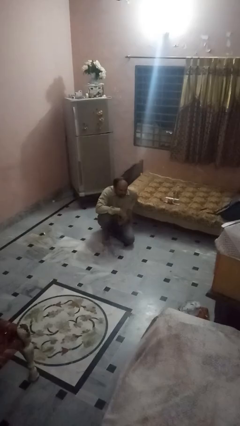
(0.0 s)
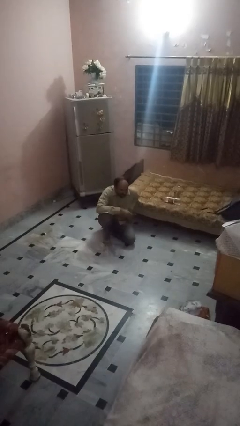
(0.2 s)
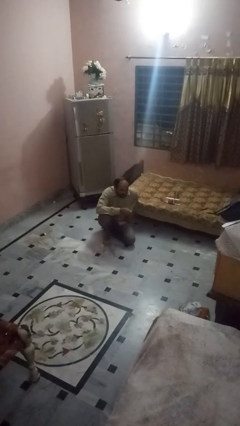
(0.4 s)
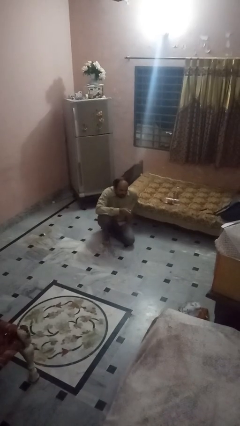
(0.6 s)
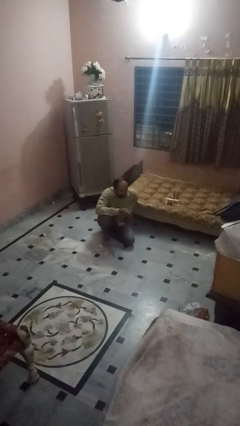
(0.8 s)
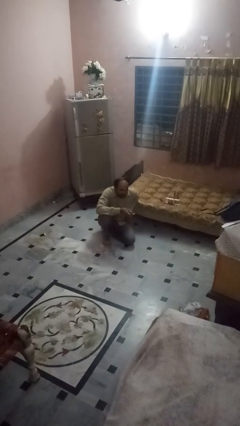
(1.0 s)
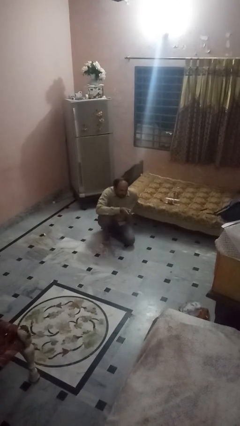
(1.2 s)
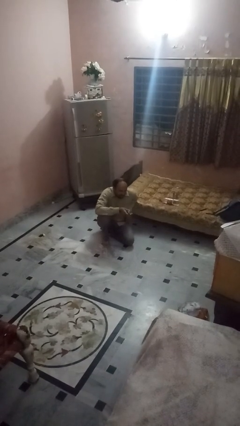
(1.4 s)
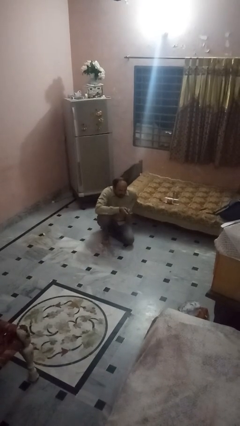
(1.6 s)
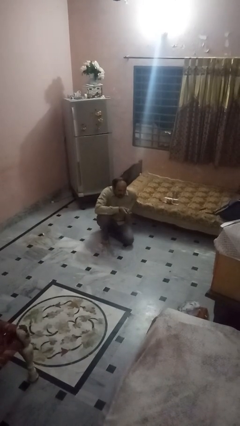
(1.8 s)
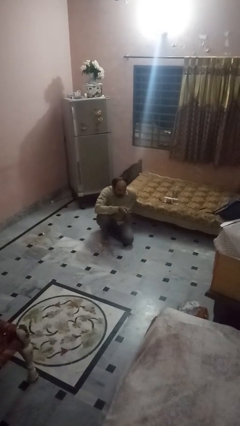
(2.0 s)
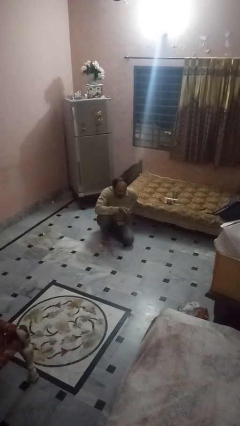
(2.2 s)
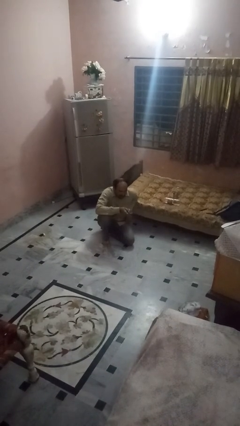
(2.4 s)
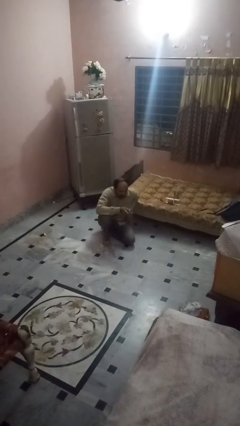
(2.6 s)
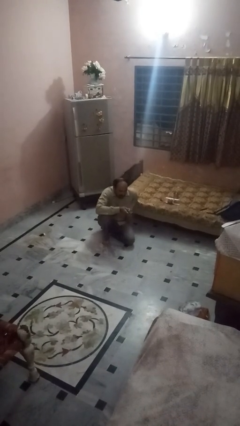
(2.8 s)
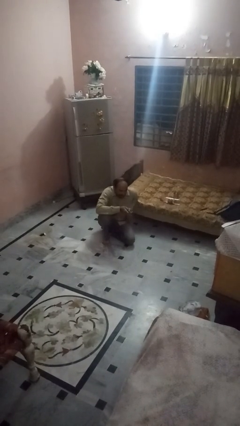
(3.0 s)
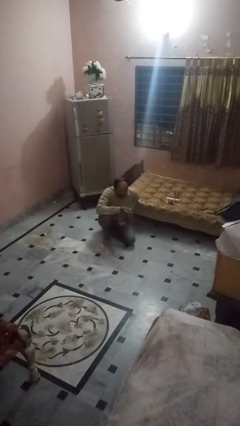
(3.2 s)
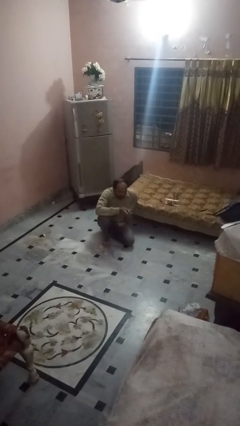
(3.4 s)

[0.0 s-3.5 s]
person uses television remote

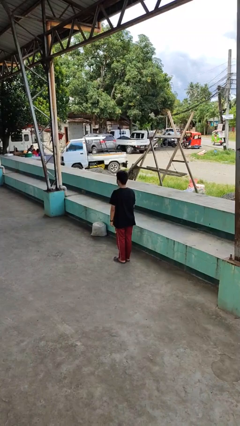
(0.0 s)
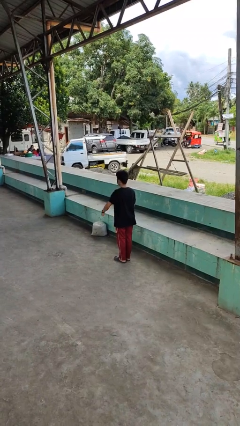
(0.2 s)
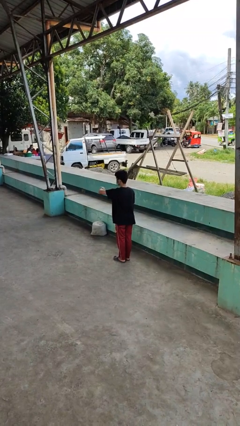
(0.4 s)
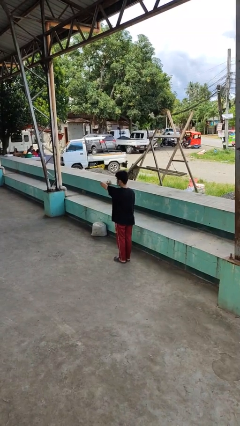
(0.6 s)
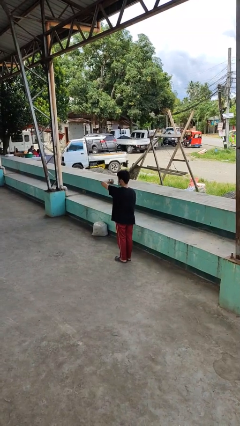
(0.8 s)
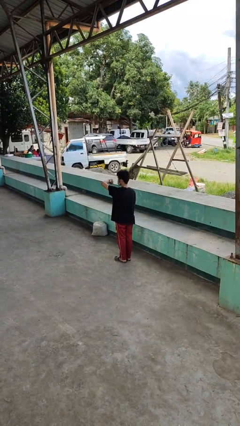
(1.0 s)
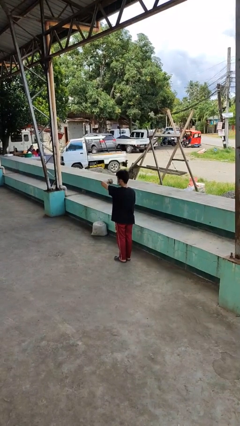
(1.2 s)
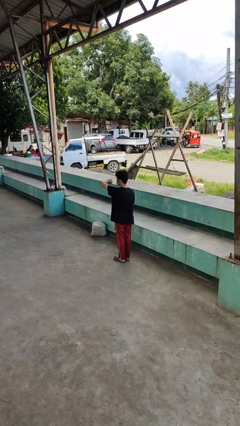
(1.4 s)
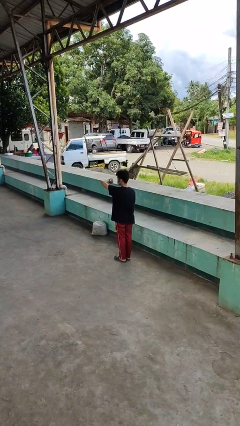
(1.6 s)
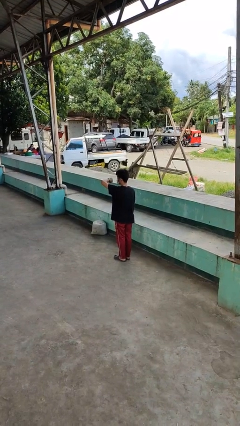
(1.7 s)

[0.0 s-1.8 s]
person looks at wristwatch

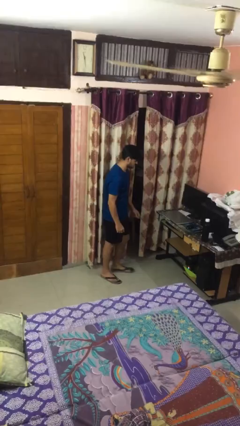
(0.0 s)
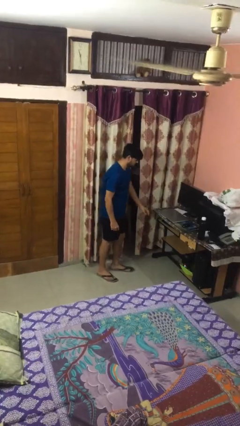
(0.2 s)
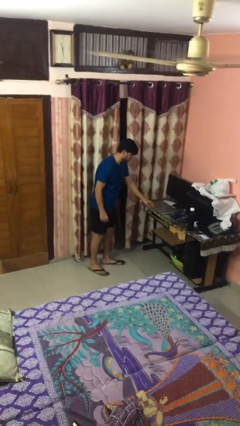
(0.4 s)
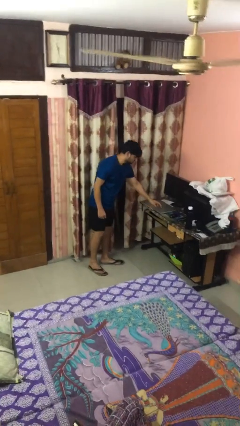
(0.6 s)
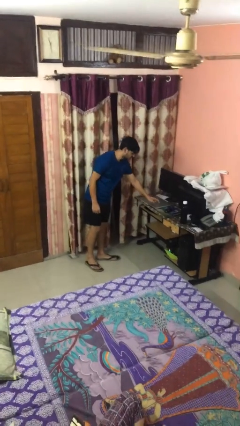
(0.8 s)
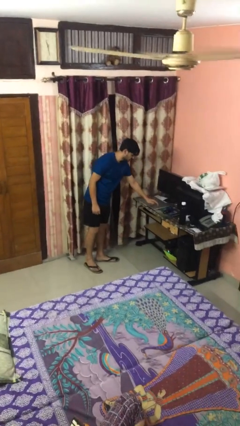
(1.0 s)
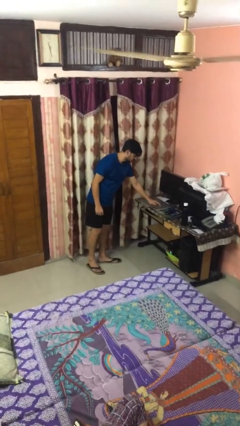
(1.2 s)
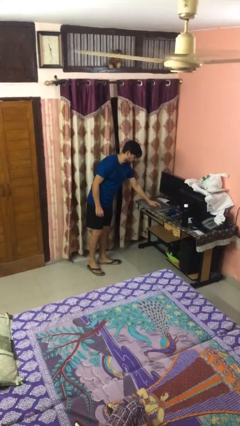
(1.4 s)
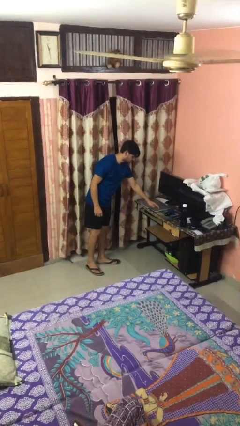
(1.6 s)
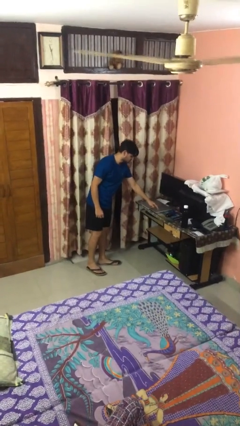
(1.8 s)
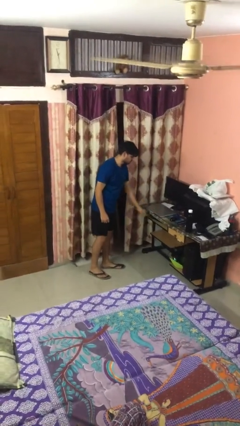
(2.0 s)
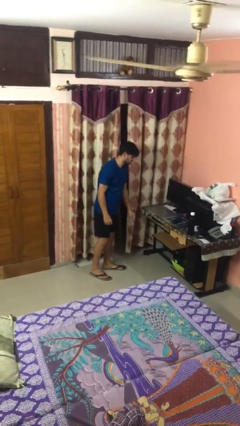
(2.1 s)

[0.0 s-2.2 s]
person taps object with finger

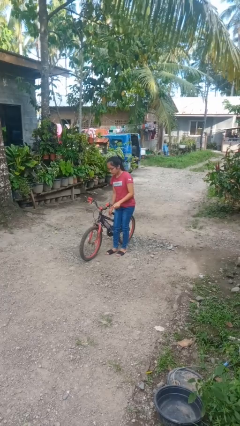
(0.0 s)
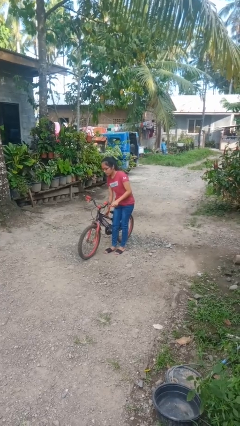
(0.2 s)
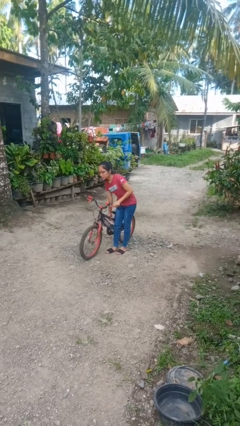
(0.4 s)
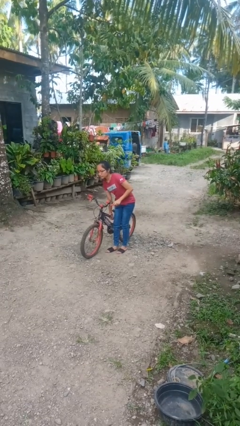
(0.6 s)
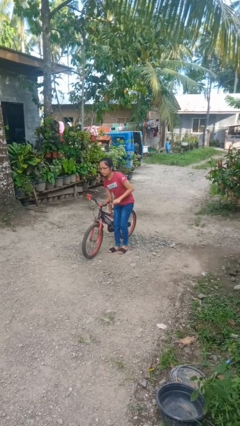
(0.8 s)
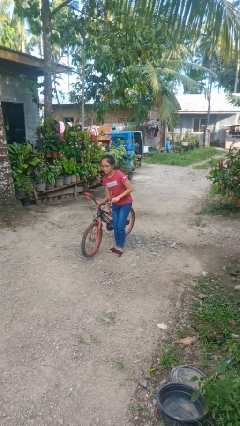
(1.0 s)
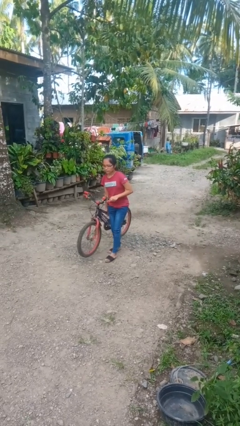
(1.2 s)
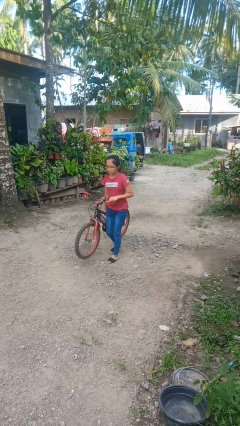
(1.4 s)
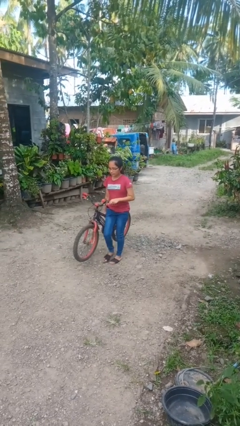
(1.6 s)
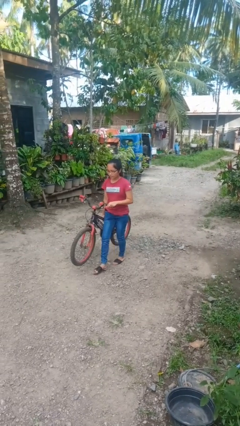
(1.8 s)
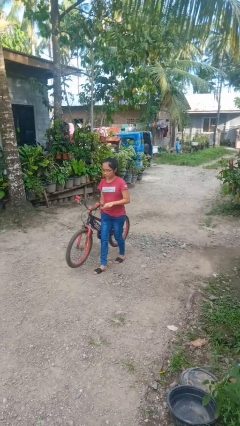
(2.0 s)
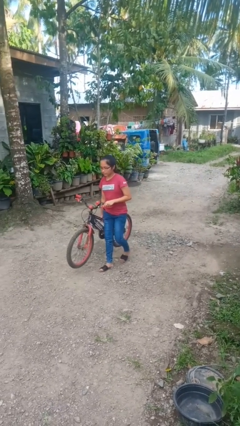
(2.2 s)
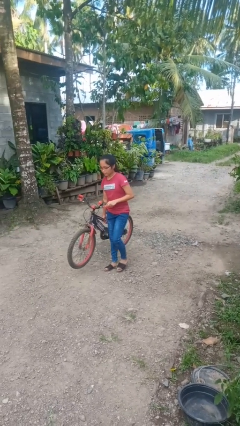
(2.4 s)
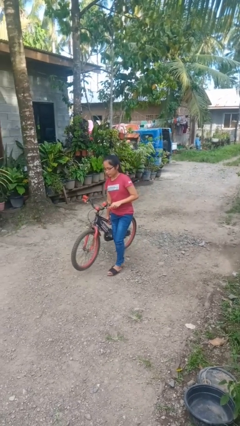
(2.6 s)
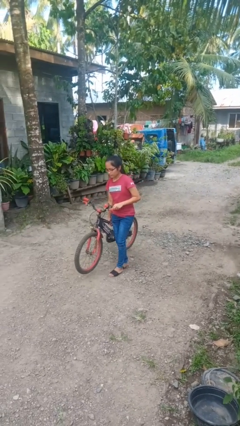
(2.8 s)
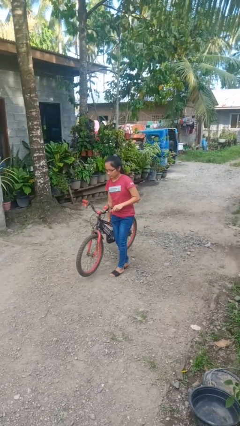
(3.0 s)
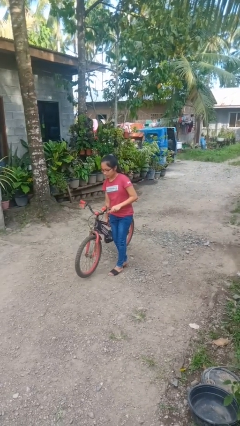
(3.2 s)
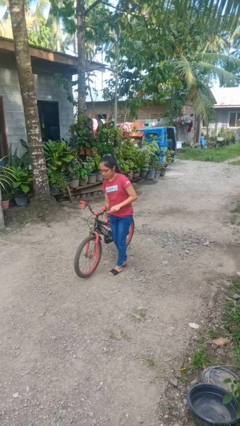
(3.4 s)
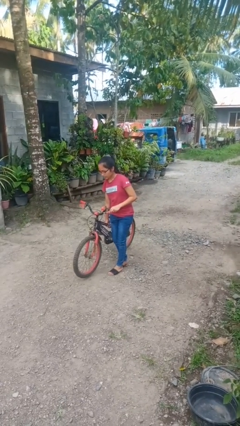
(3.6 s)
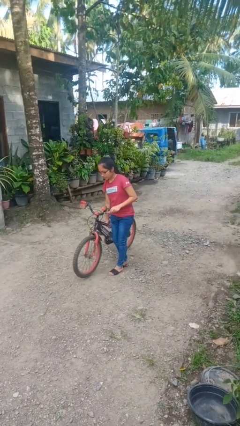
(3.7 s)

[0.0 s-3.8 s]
person carries bicycle

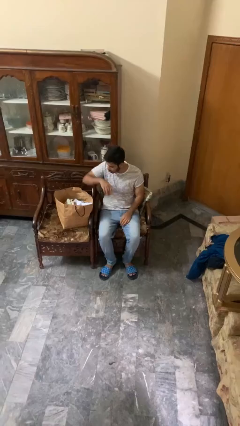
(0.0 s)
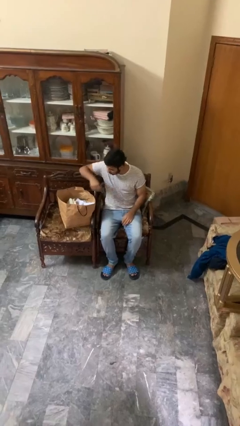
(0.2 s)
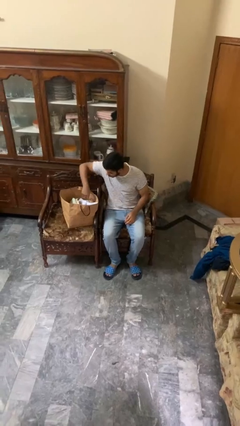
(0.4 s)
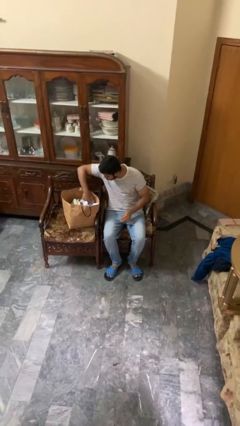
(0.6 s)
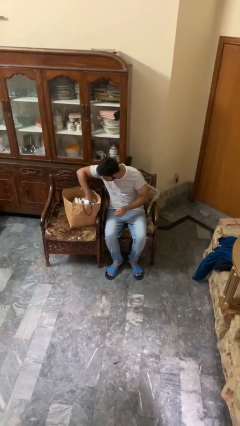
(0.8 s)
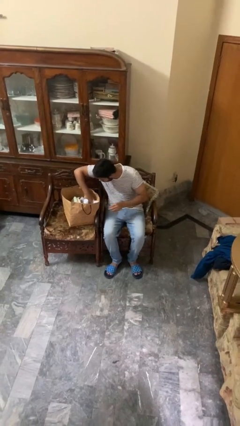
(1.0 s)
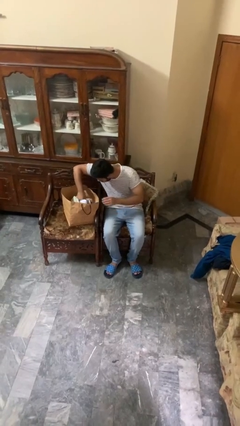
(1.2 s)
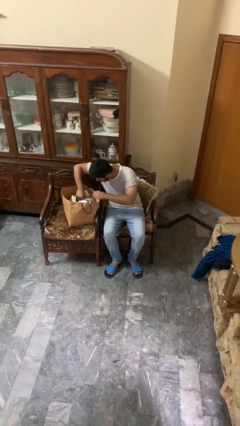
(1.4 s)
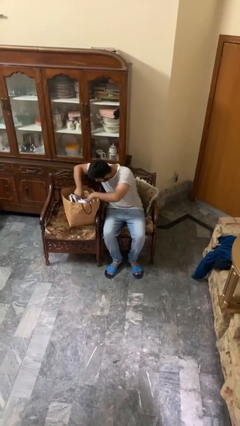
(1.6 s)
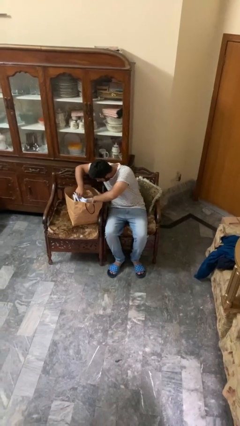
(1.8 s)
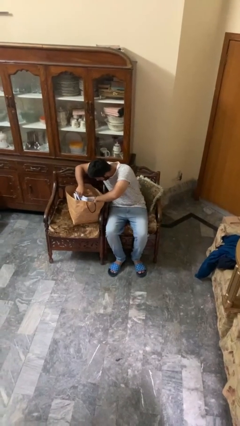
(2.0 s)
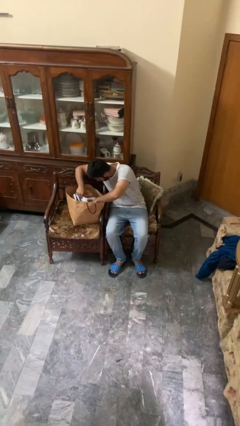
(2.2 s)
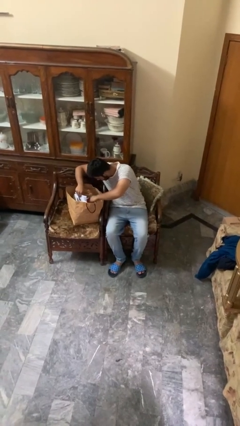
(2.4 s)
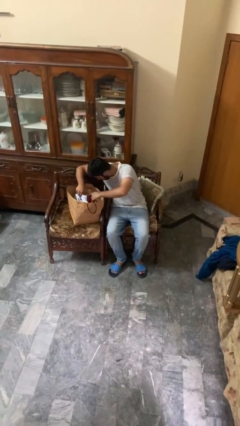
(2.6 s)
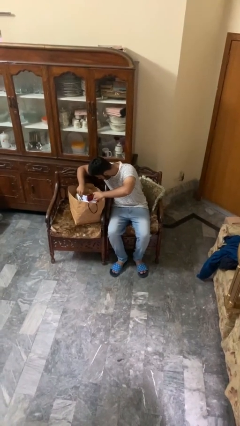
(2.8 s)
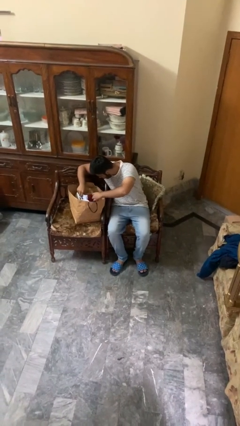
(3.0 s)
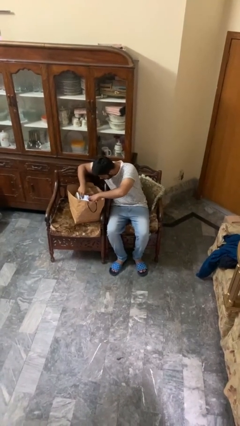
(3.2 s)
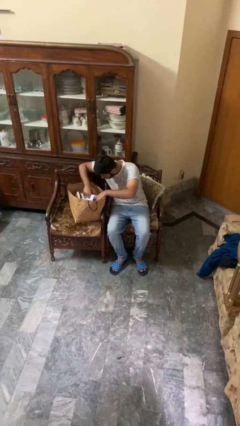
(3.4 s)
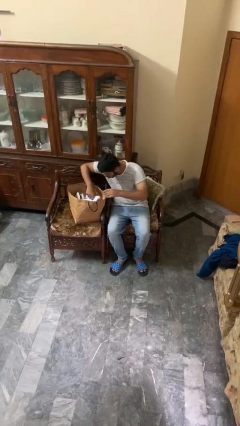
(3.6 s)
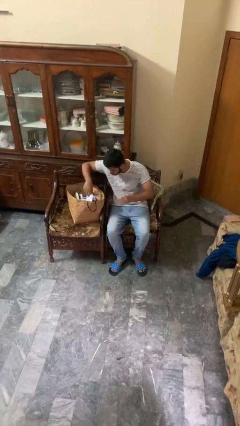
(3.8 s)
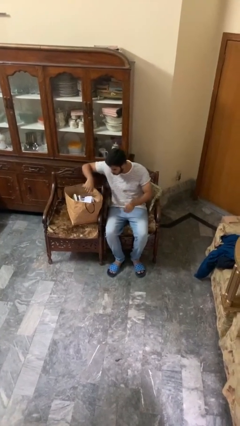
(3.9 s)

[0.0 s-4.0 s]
person searches in bag

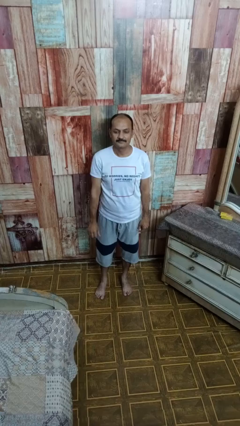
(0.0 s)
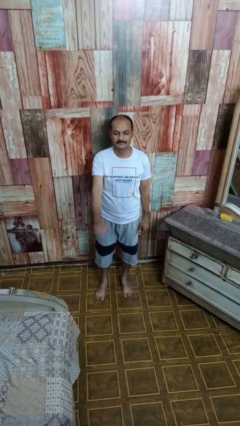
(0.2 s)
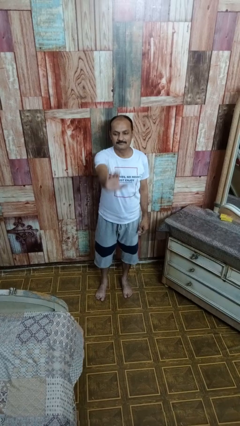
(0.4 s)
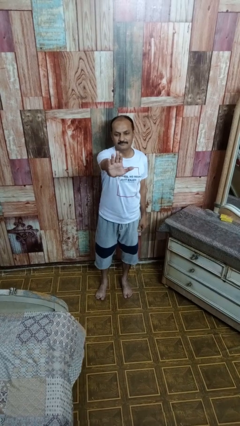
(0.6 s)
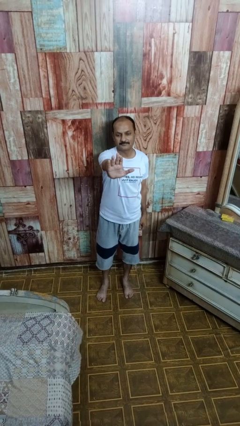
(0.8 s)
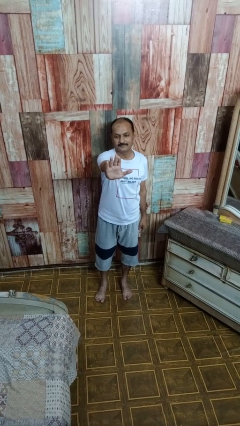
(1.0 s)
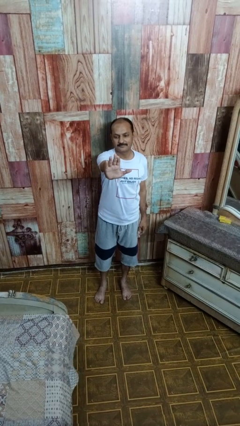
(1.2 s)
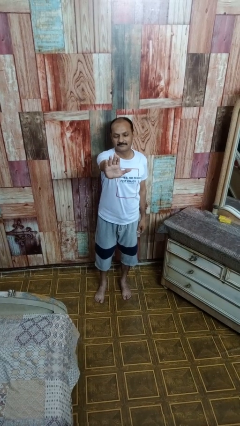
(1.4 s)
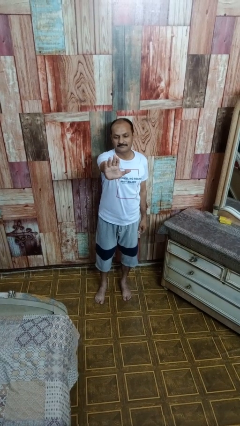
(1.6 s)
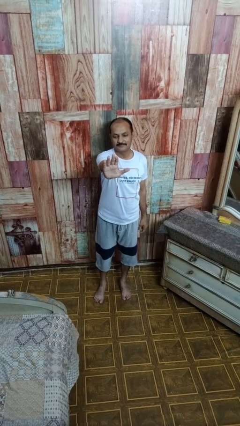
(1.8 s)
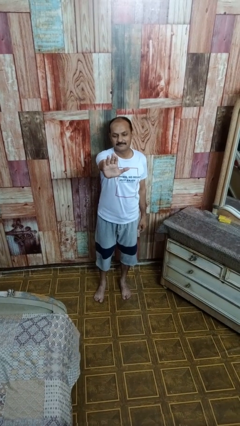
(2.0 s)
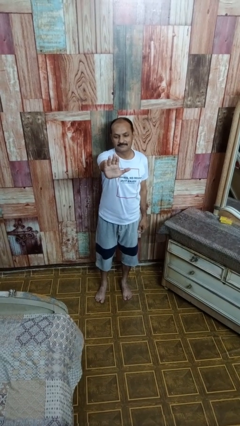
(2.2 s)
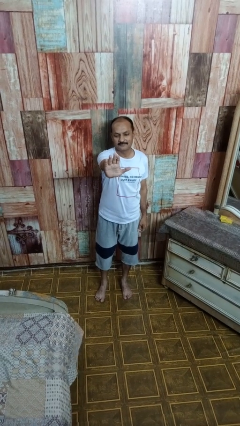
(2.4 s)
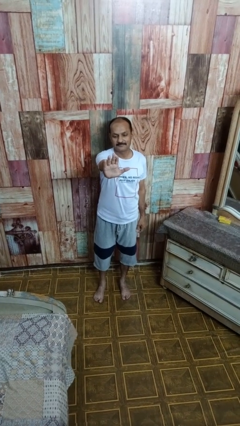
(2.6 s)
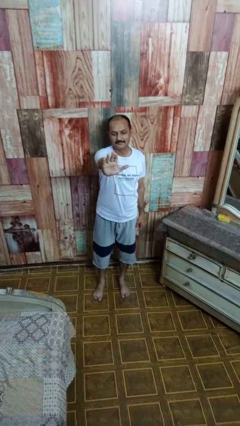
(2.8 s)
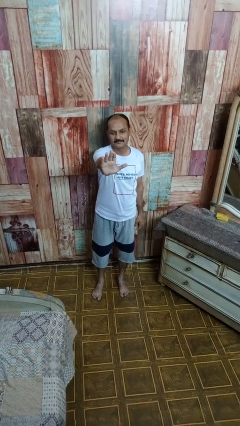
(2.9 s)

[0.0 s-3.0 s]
person gestures stop
